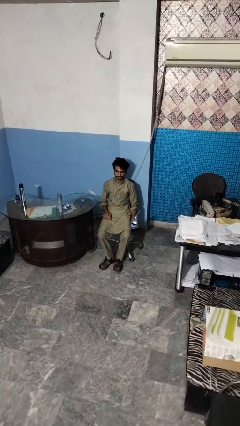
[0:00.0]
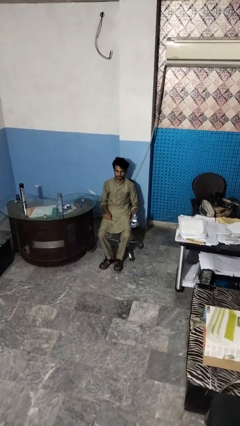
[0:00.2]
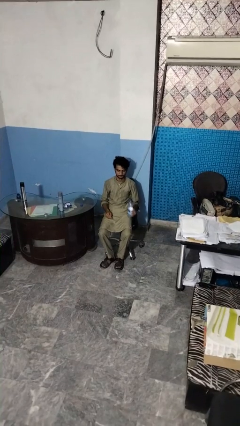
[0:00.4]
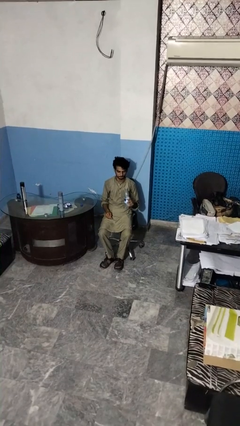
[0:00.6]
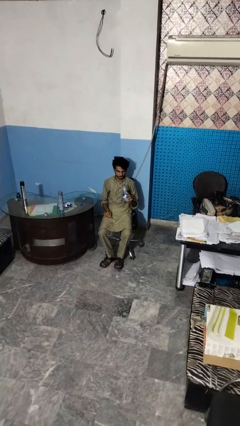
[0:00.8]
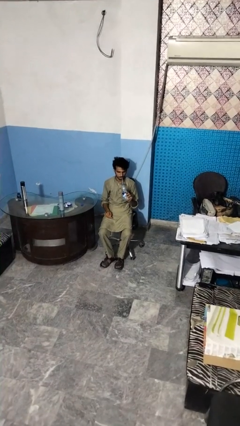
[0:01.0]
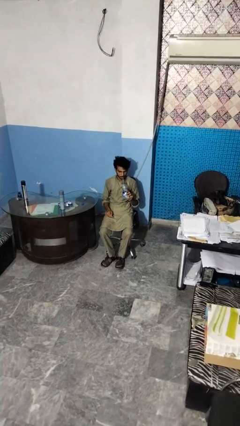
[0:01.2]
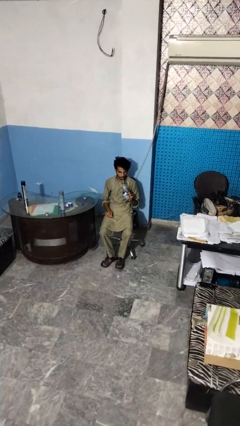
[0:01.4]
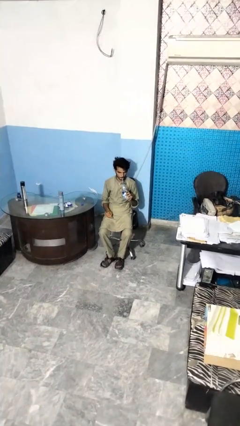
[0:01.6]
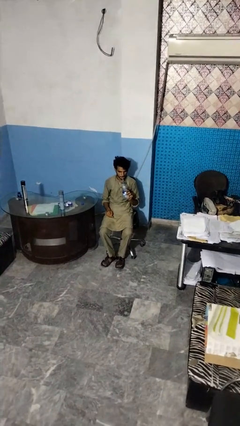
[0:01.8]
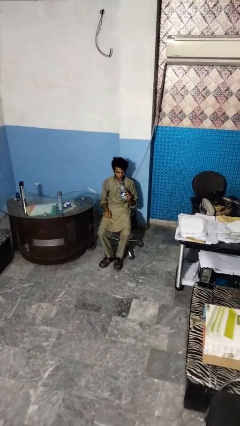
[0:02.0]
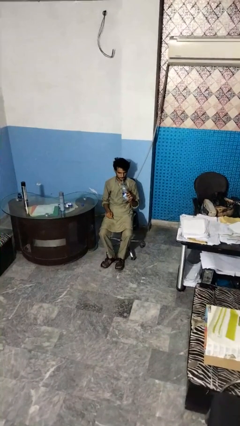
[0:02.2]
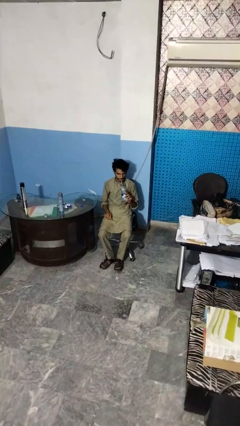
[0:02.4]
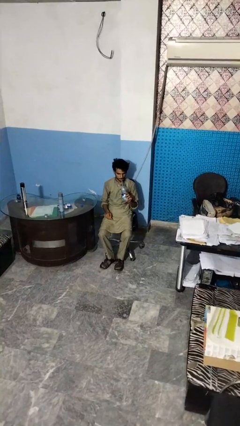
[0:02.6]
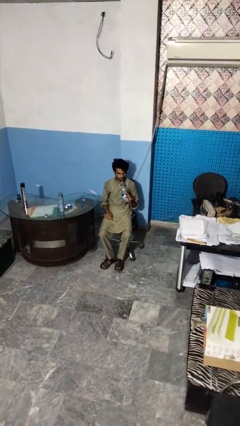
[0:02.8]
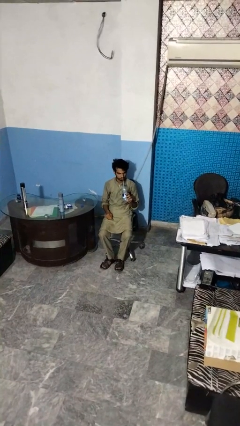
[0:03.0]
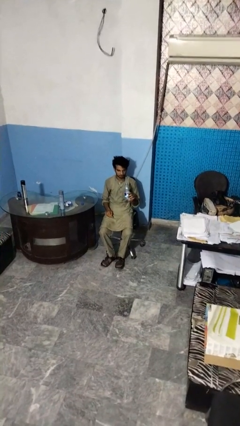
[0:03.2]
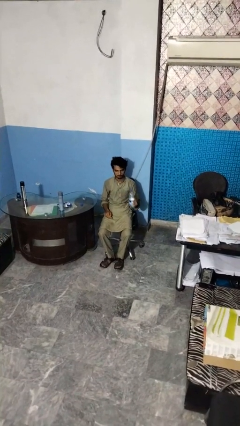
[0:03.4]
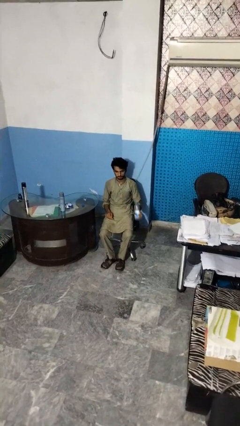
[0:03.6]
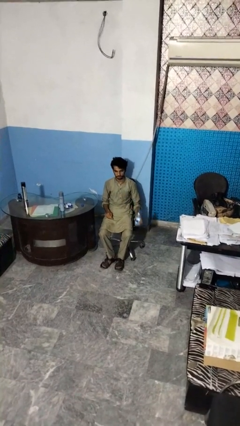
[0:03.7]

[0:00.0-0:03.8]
person drinks from straw

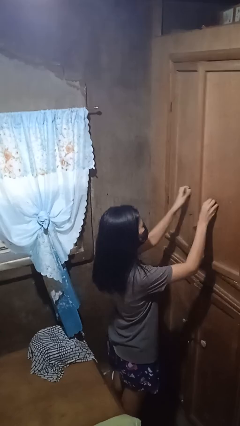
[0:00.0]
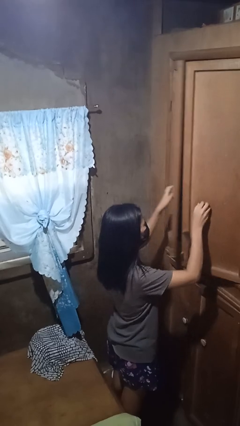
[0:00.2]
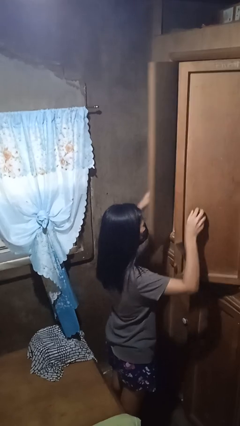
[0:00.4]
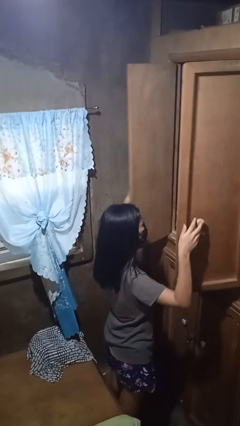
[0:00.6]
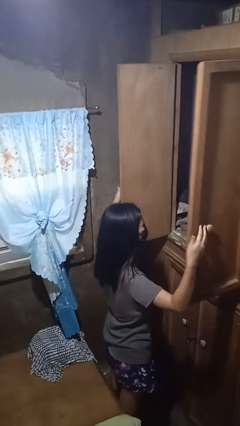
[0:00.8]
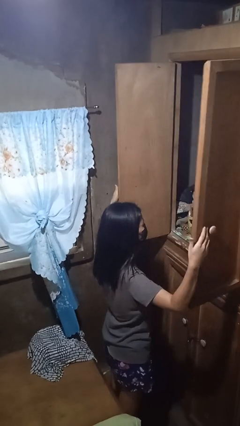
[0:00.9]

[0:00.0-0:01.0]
person opens closet door

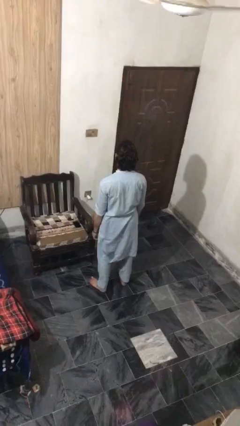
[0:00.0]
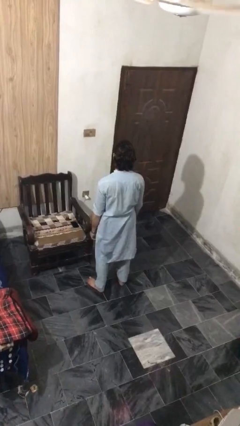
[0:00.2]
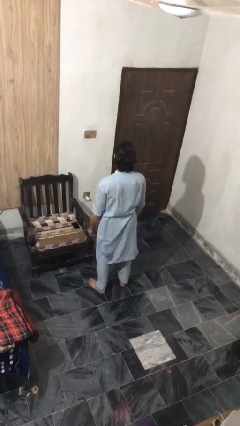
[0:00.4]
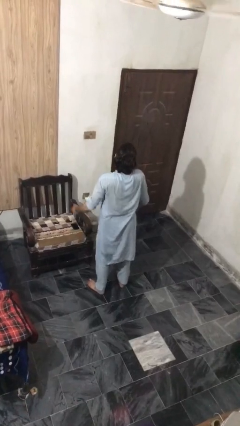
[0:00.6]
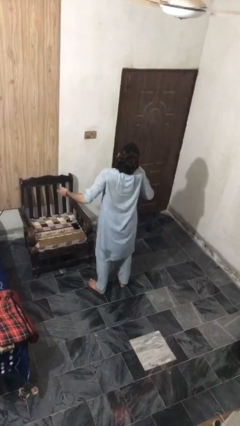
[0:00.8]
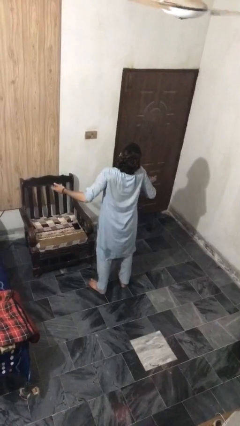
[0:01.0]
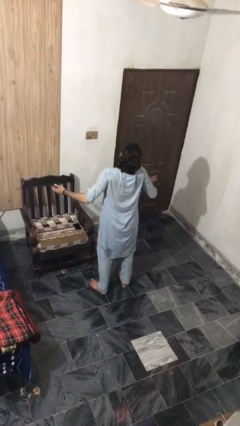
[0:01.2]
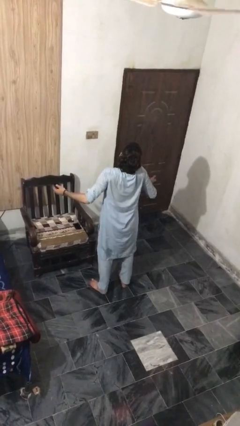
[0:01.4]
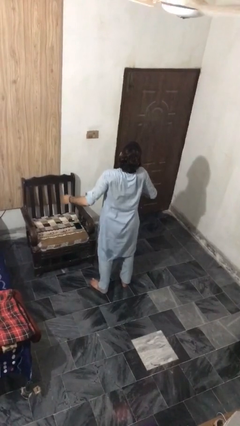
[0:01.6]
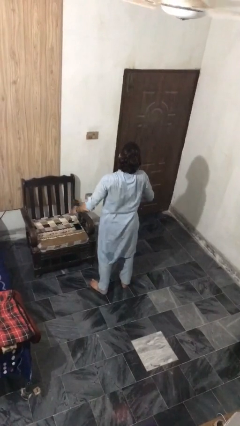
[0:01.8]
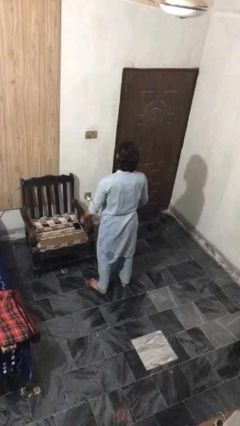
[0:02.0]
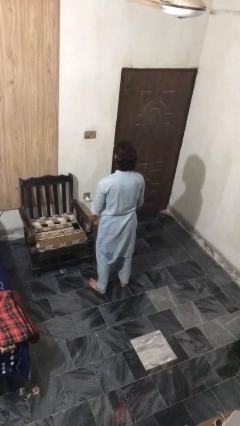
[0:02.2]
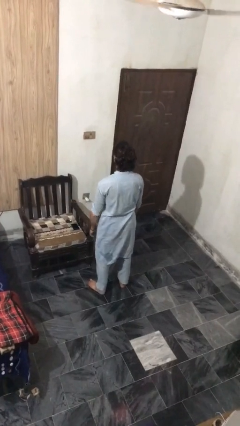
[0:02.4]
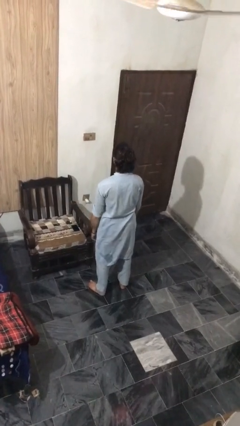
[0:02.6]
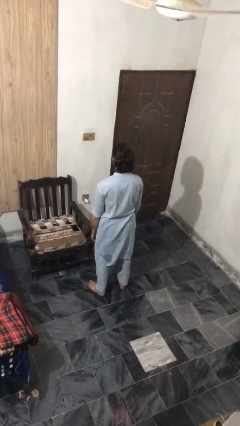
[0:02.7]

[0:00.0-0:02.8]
person shrugs

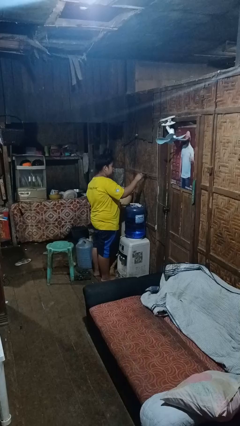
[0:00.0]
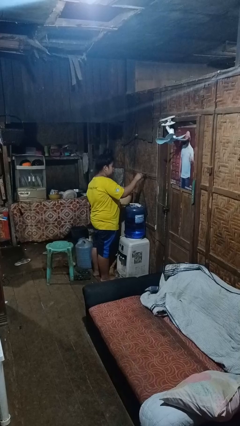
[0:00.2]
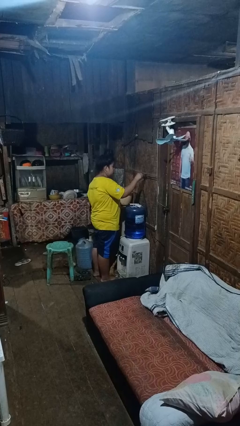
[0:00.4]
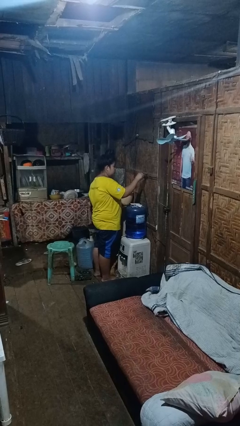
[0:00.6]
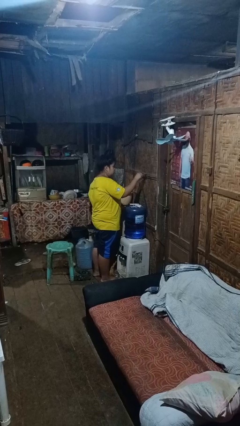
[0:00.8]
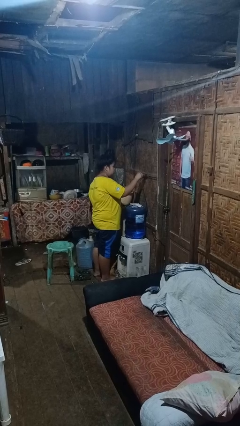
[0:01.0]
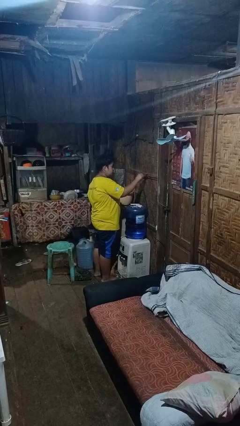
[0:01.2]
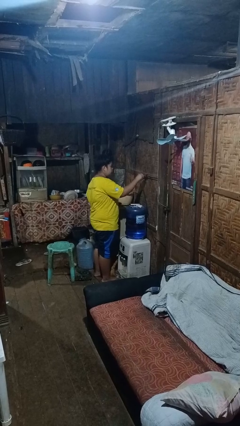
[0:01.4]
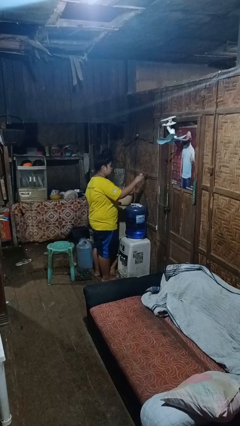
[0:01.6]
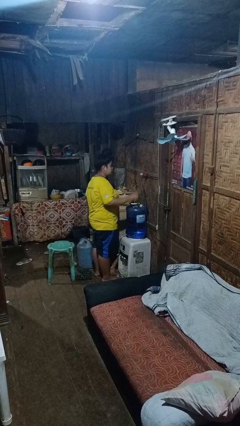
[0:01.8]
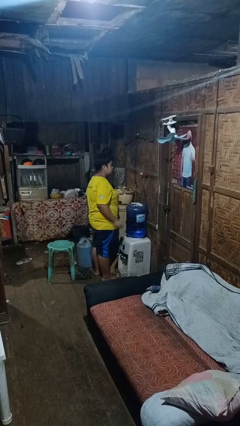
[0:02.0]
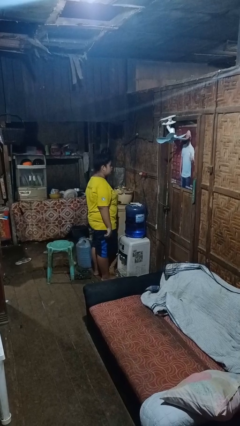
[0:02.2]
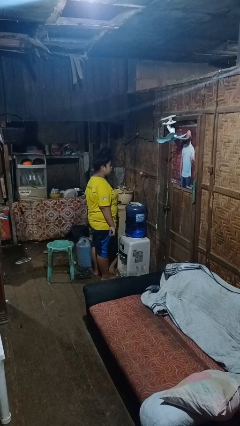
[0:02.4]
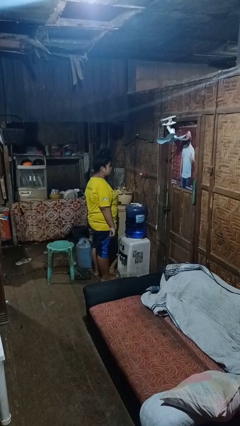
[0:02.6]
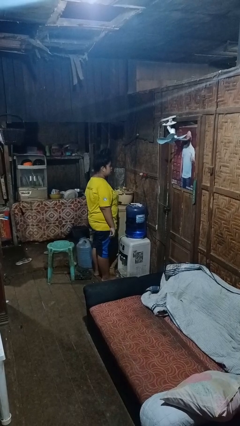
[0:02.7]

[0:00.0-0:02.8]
person plugs into electrical socket

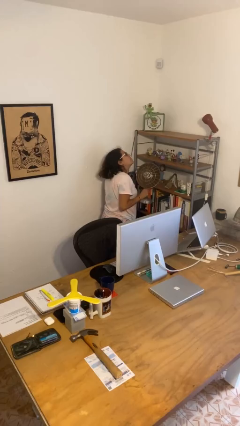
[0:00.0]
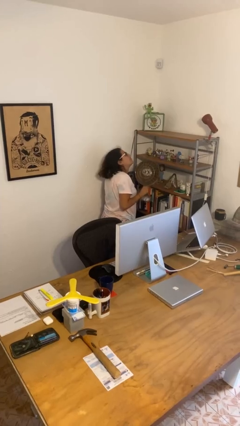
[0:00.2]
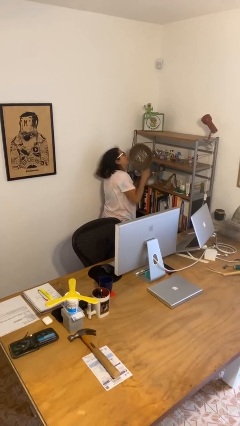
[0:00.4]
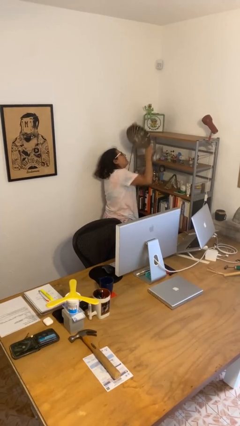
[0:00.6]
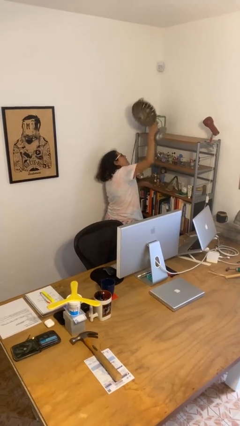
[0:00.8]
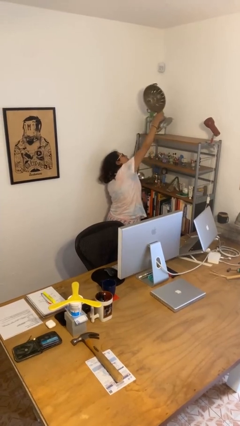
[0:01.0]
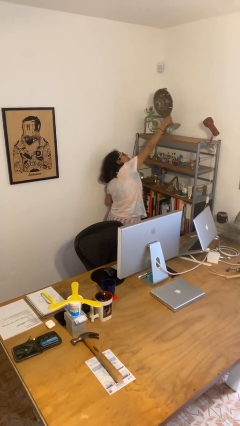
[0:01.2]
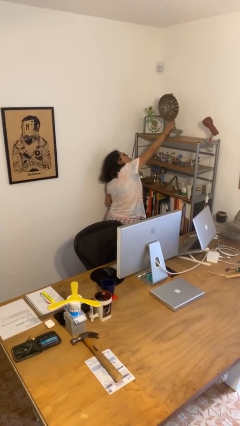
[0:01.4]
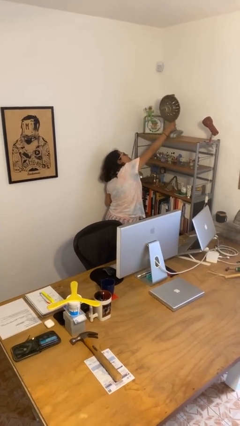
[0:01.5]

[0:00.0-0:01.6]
person puts down object on shelf

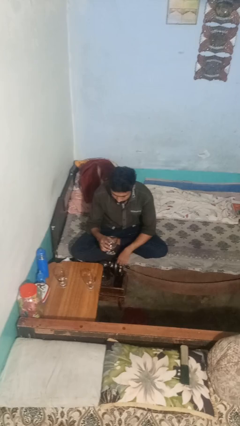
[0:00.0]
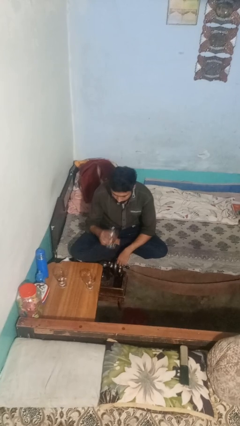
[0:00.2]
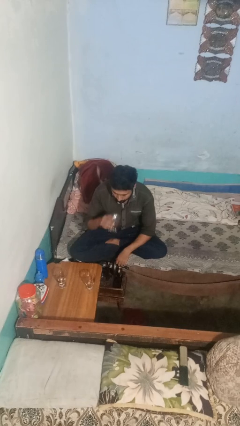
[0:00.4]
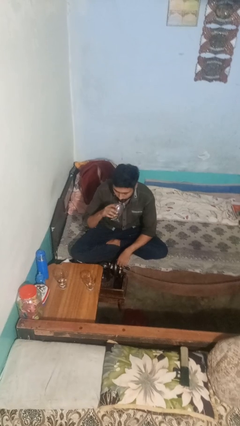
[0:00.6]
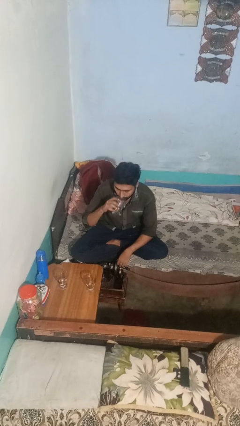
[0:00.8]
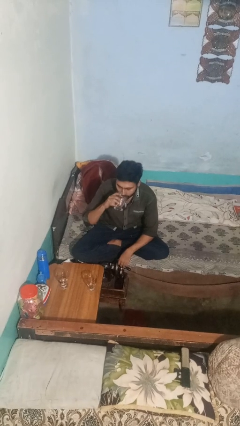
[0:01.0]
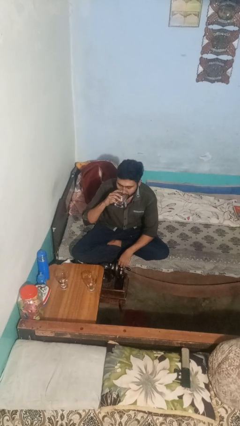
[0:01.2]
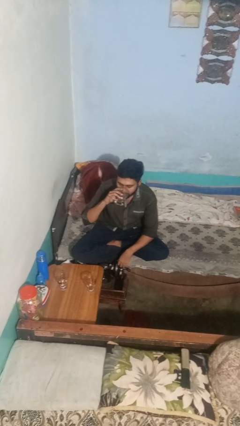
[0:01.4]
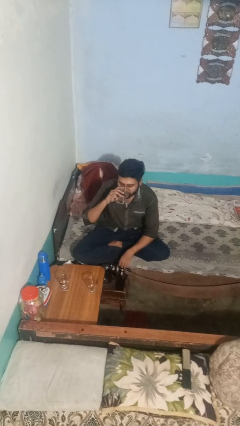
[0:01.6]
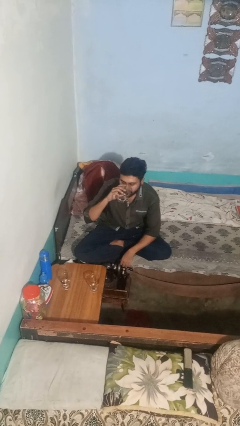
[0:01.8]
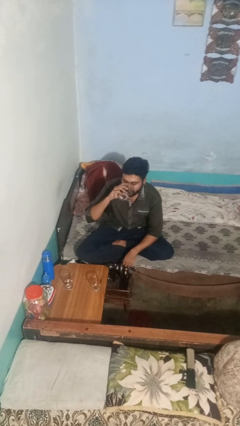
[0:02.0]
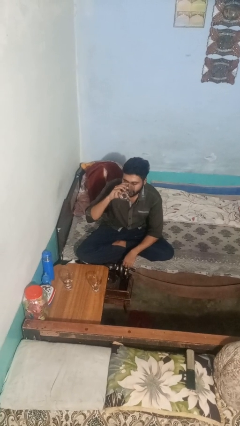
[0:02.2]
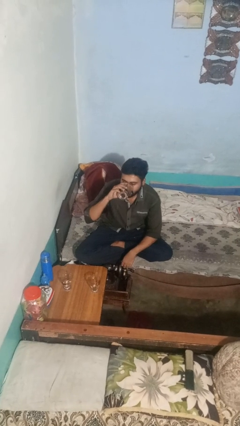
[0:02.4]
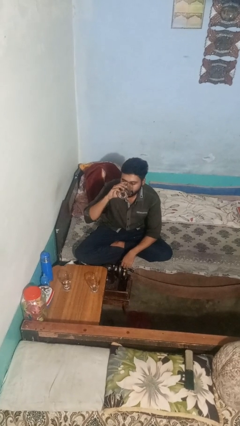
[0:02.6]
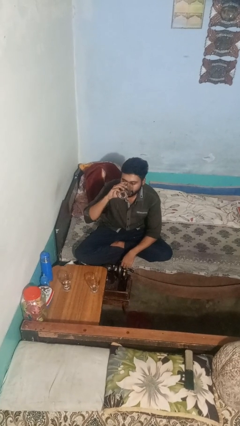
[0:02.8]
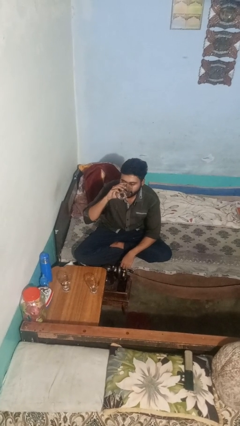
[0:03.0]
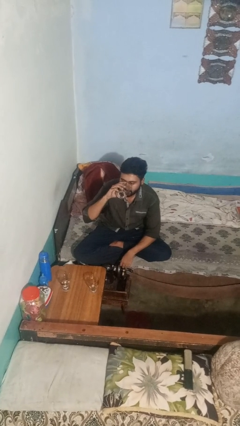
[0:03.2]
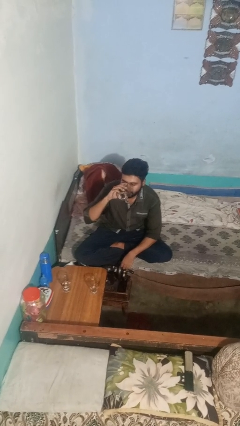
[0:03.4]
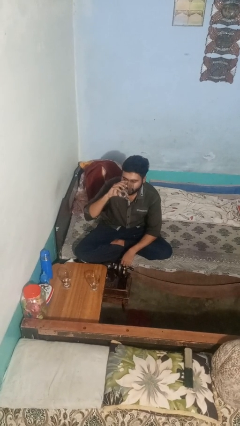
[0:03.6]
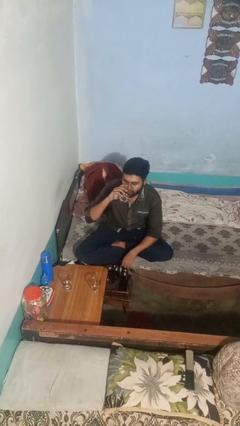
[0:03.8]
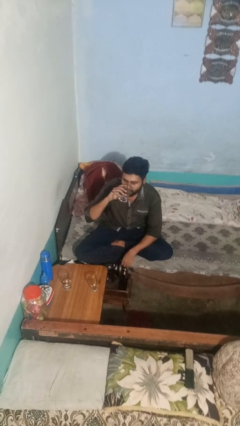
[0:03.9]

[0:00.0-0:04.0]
person drinks from shotglass

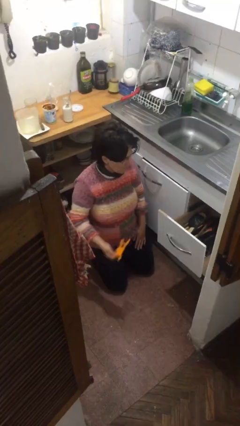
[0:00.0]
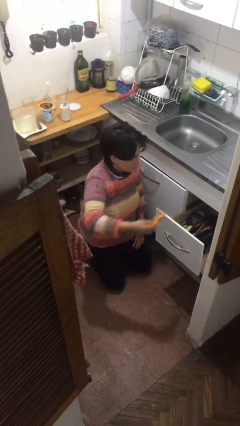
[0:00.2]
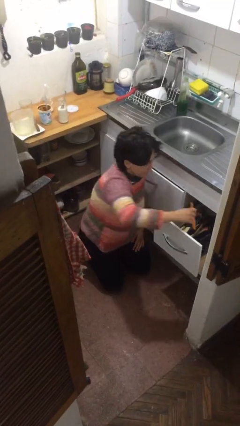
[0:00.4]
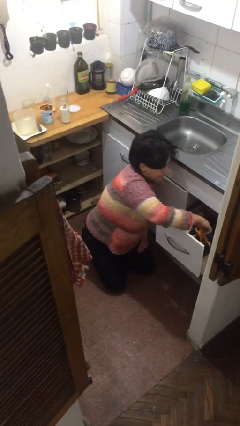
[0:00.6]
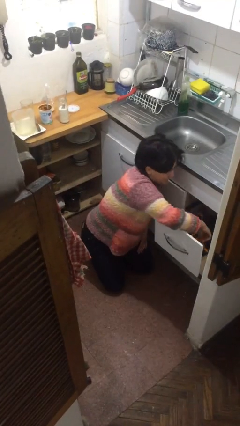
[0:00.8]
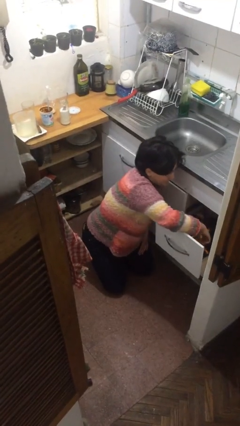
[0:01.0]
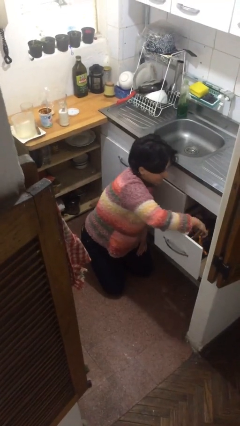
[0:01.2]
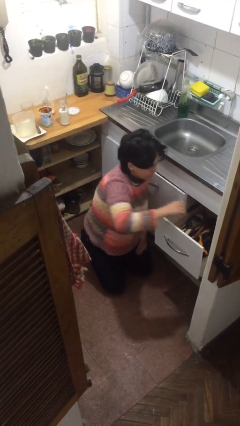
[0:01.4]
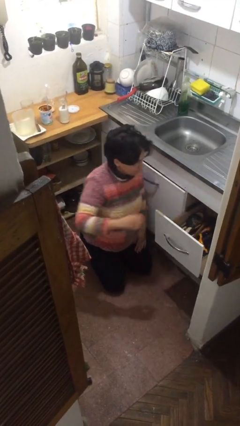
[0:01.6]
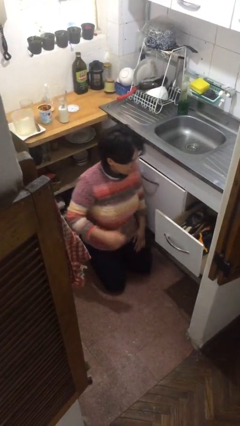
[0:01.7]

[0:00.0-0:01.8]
person puts object into kitchen drawer
